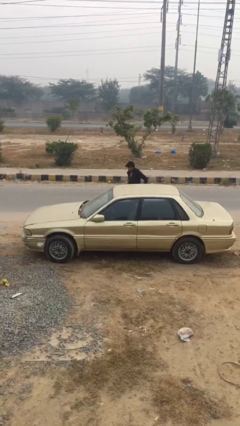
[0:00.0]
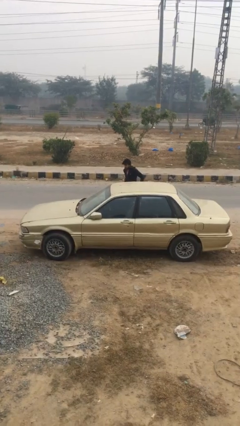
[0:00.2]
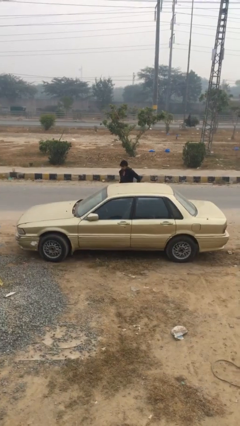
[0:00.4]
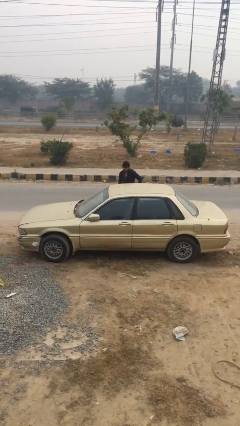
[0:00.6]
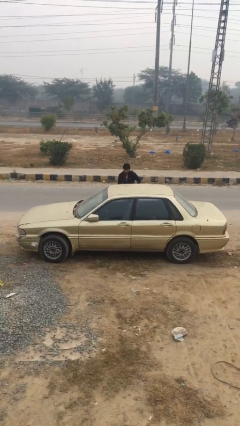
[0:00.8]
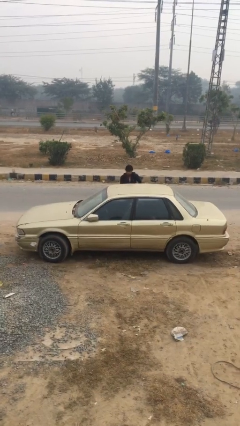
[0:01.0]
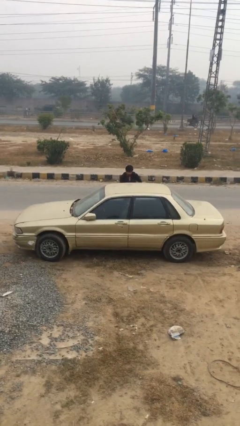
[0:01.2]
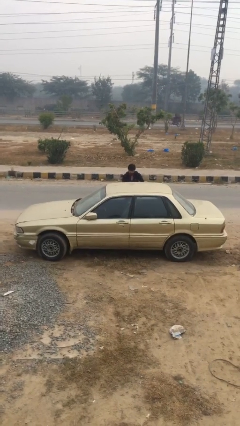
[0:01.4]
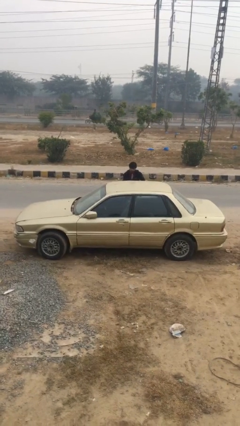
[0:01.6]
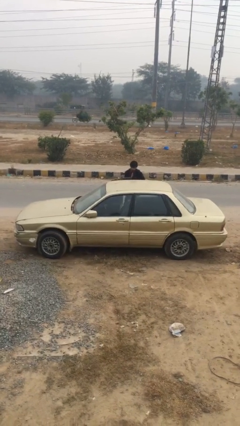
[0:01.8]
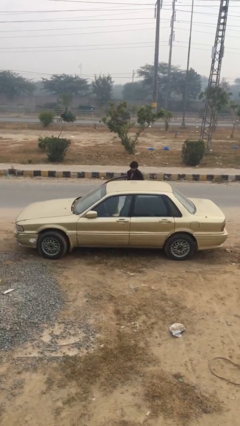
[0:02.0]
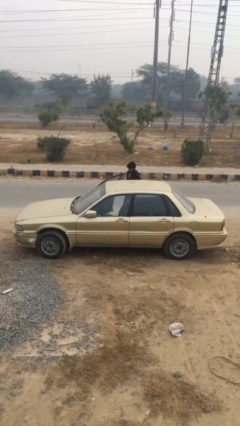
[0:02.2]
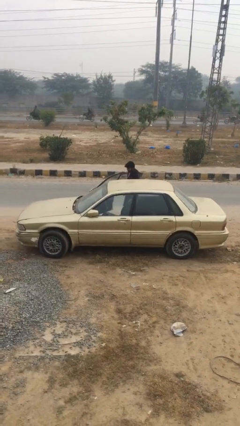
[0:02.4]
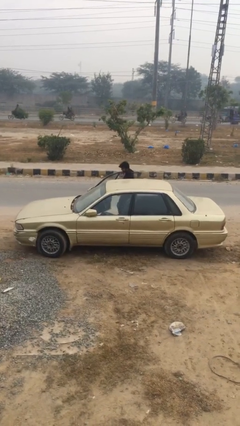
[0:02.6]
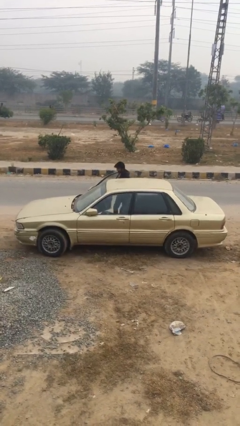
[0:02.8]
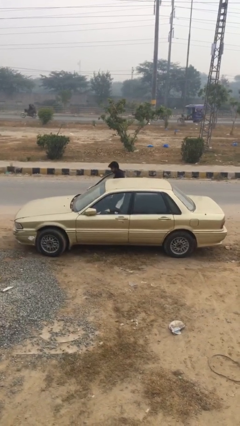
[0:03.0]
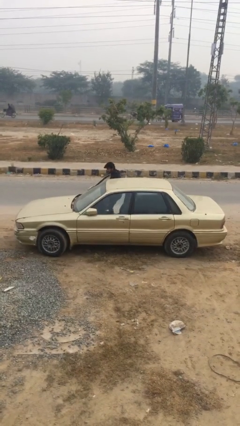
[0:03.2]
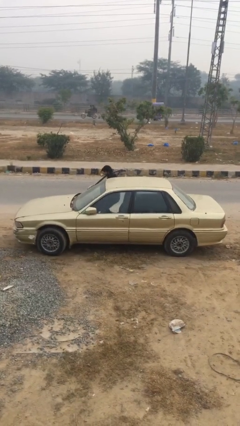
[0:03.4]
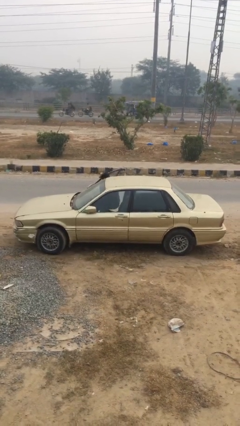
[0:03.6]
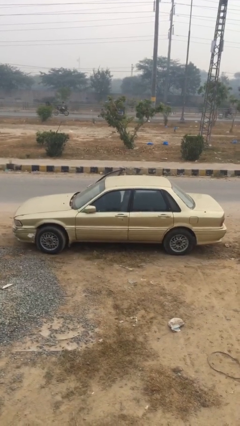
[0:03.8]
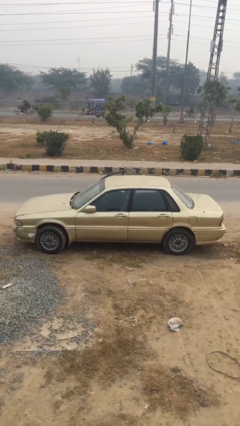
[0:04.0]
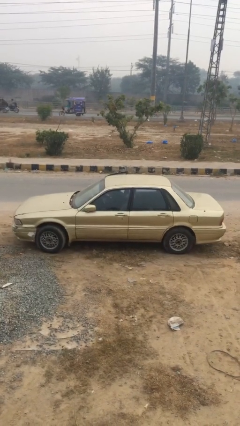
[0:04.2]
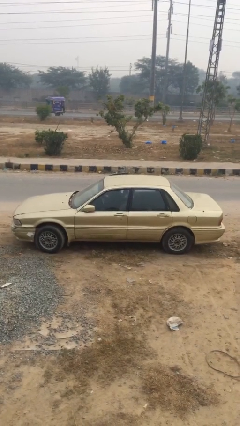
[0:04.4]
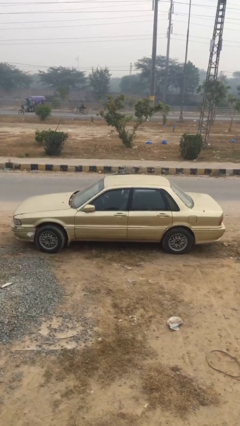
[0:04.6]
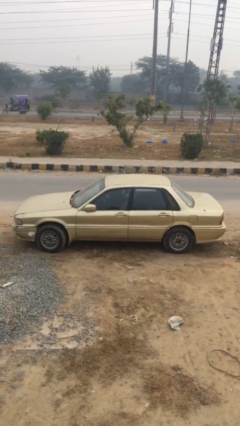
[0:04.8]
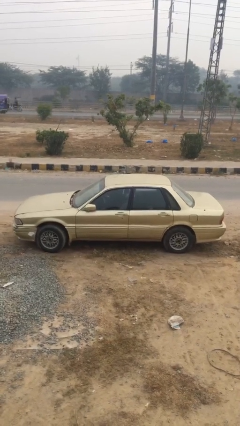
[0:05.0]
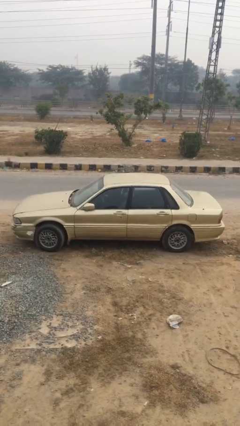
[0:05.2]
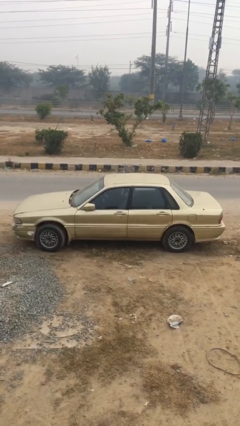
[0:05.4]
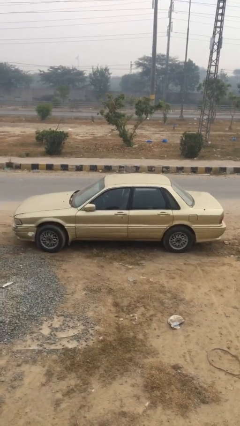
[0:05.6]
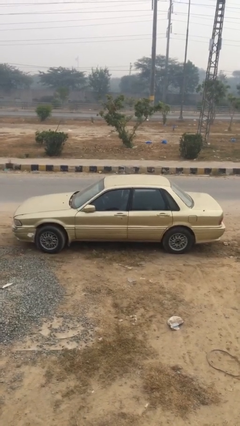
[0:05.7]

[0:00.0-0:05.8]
car picks up person

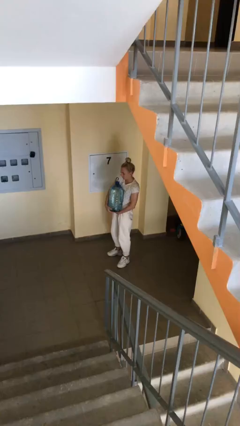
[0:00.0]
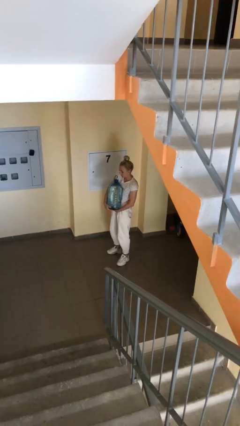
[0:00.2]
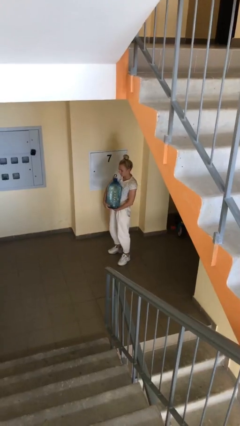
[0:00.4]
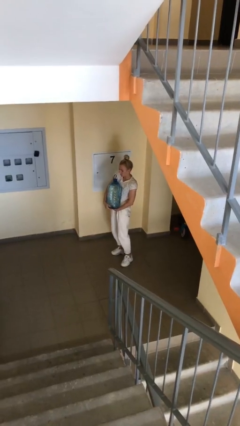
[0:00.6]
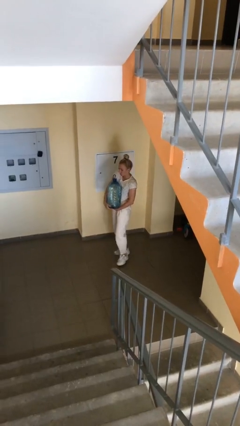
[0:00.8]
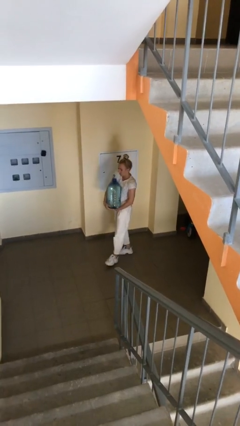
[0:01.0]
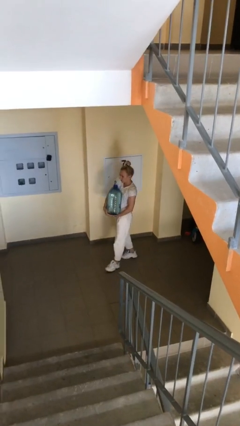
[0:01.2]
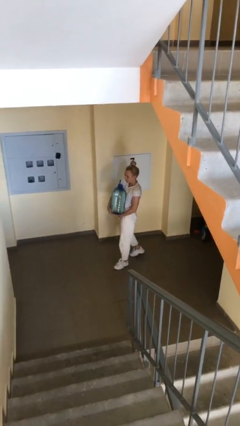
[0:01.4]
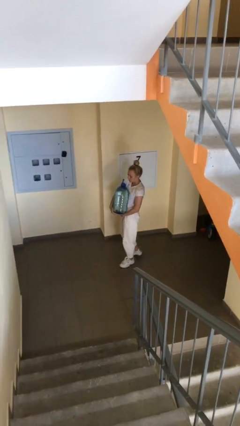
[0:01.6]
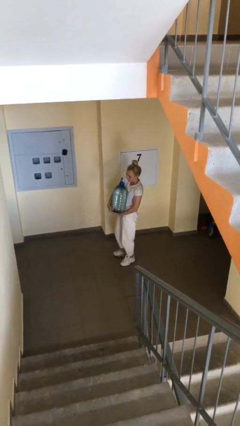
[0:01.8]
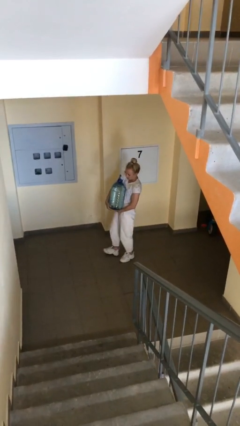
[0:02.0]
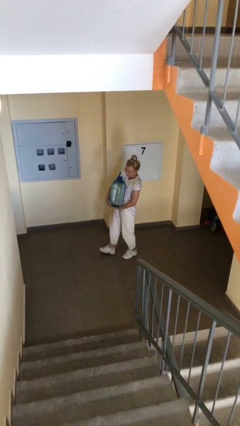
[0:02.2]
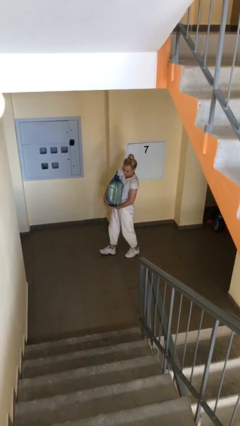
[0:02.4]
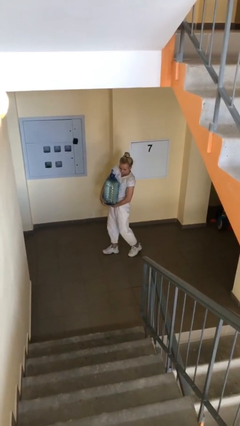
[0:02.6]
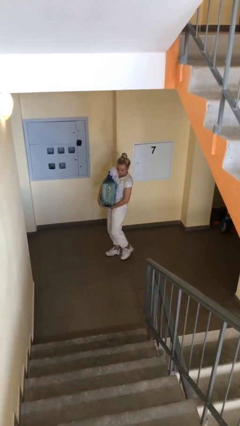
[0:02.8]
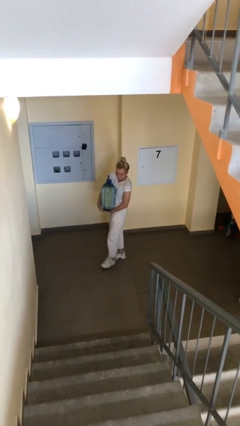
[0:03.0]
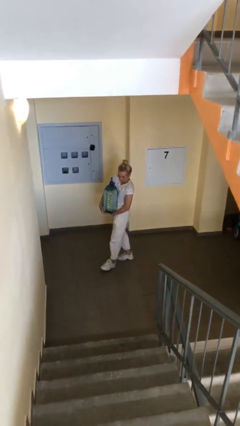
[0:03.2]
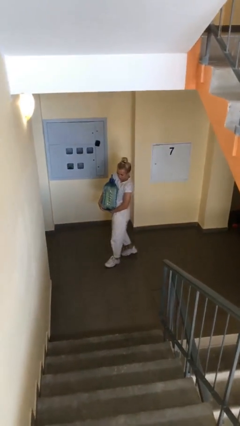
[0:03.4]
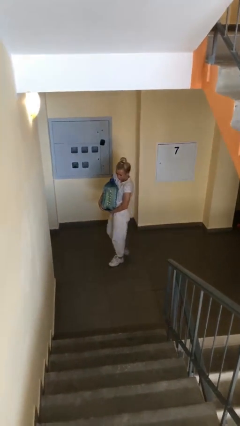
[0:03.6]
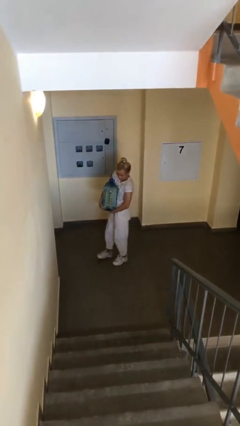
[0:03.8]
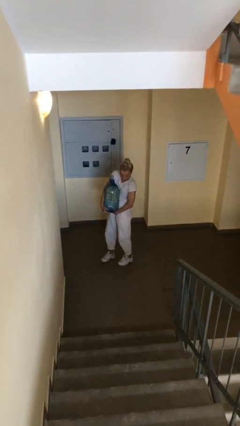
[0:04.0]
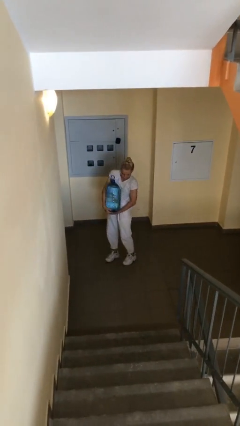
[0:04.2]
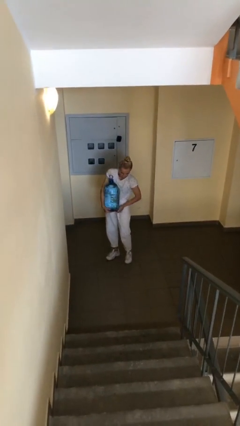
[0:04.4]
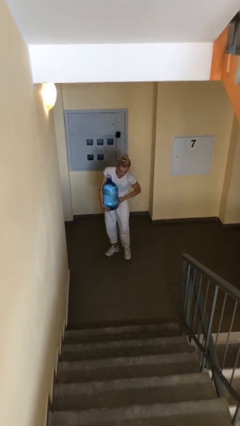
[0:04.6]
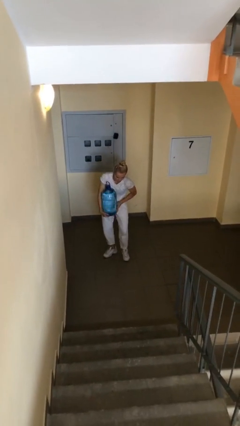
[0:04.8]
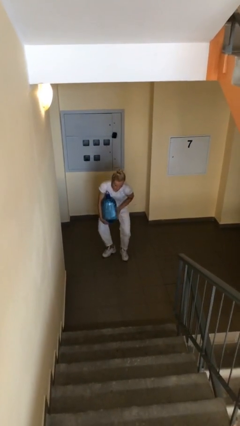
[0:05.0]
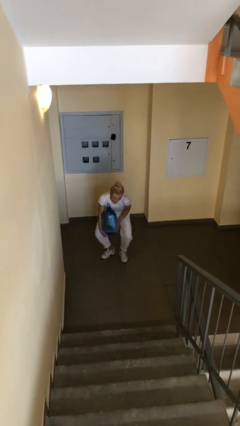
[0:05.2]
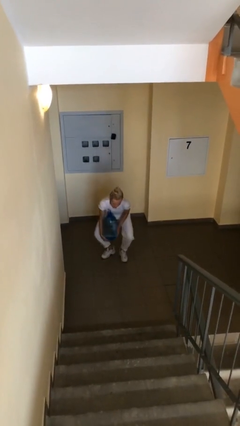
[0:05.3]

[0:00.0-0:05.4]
person carries heavy object

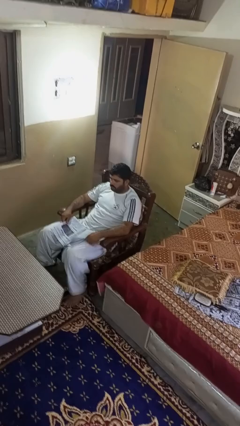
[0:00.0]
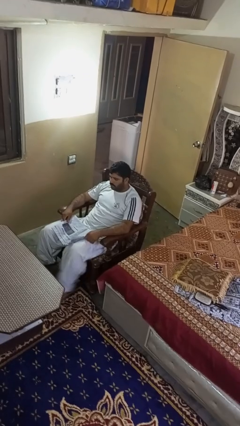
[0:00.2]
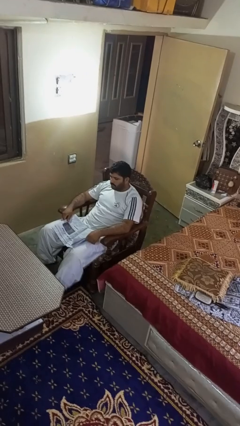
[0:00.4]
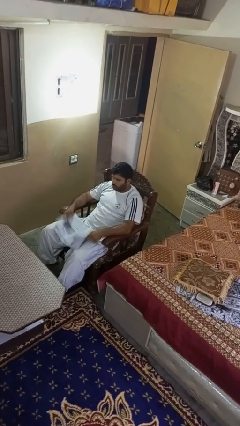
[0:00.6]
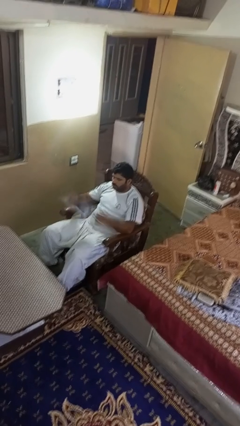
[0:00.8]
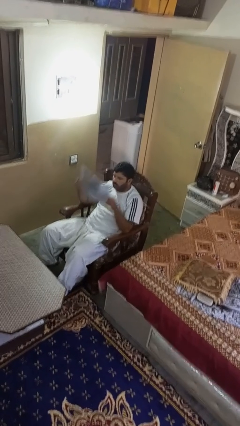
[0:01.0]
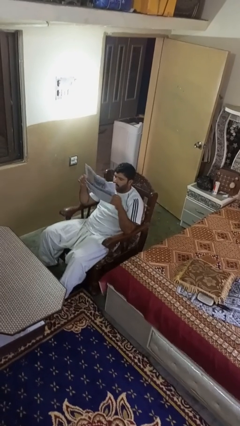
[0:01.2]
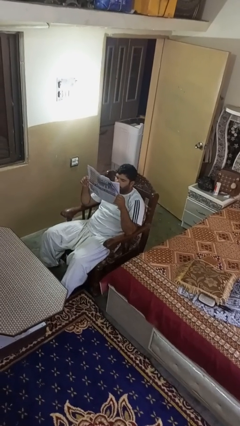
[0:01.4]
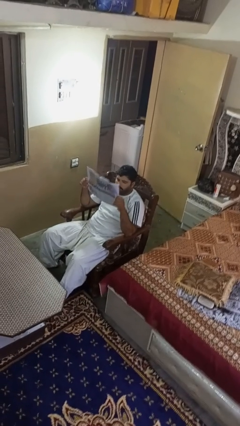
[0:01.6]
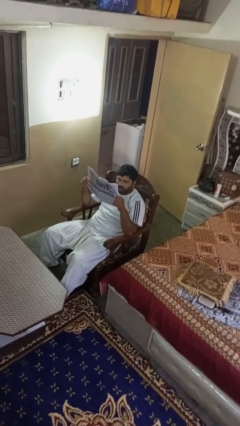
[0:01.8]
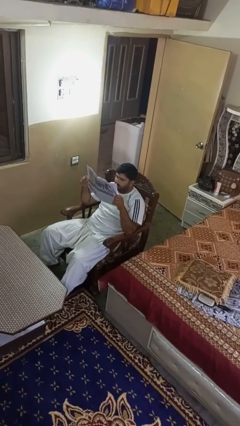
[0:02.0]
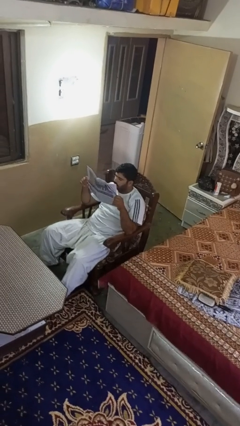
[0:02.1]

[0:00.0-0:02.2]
person reads newspaper

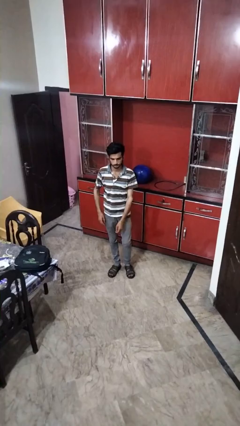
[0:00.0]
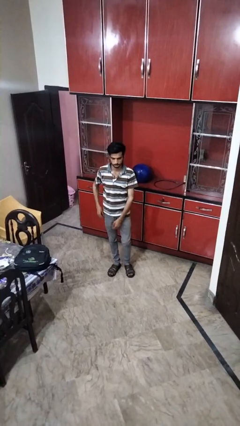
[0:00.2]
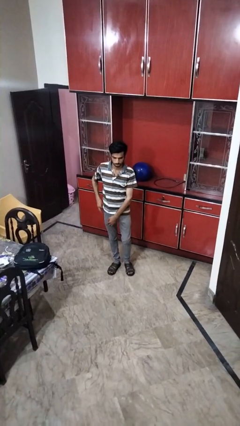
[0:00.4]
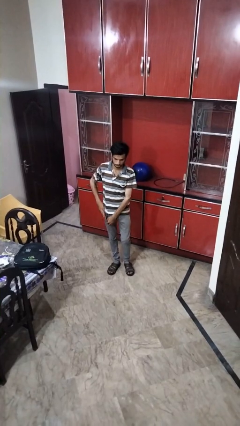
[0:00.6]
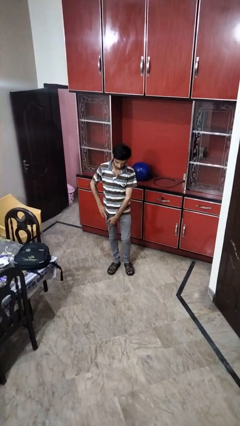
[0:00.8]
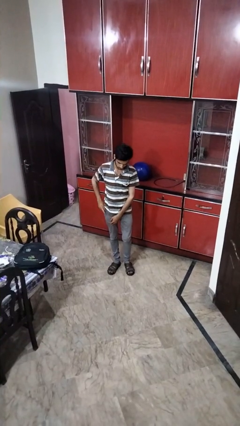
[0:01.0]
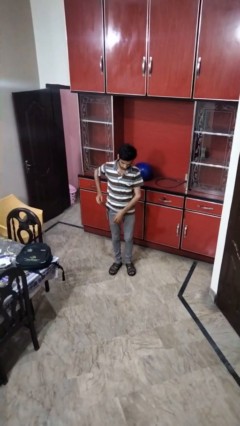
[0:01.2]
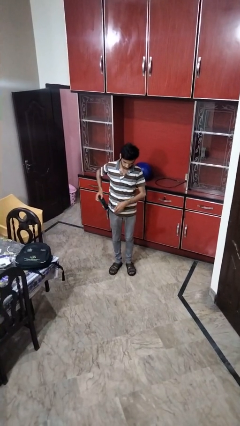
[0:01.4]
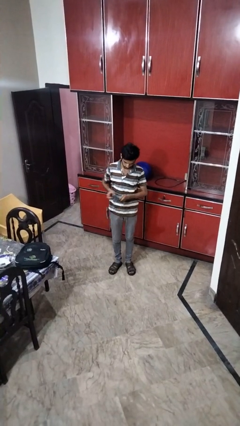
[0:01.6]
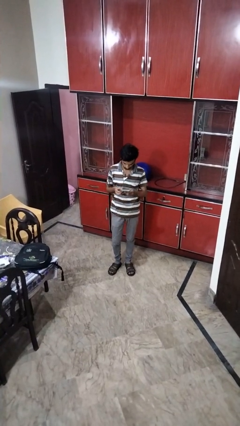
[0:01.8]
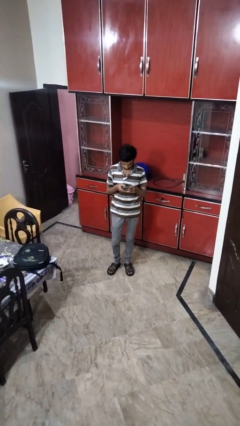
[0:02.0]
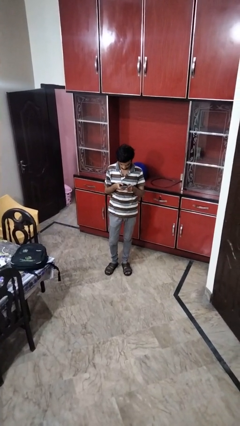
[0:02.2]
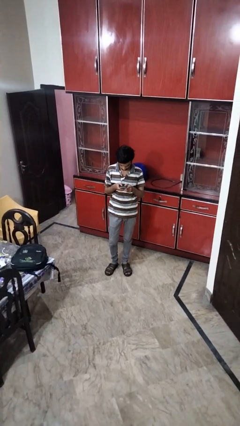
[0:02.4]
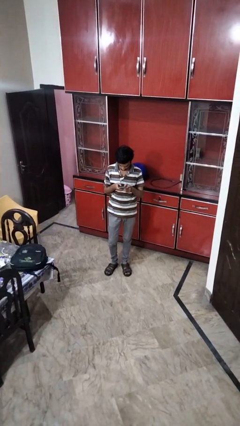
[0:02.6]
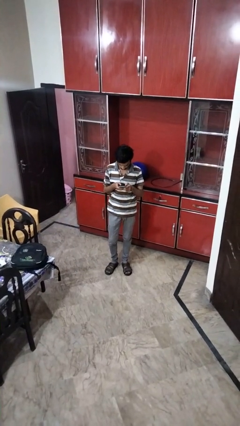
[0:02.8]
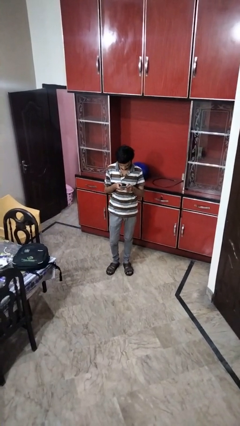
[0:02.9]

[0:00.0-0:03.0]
person takes phone from pocket

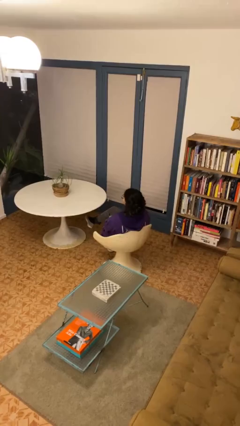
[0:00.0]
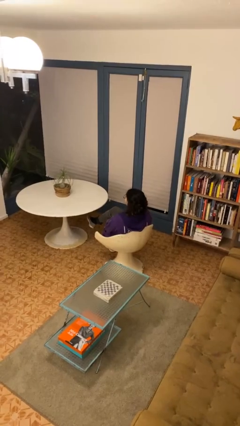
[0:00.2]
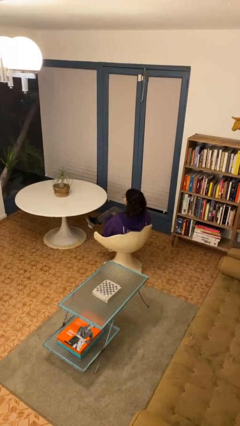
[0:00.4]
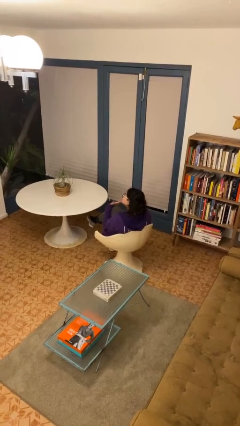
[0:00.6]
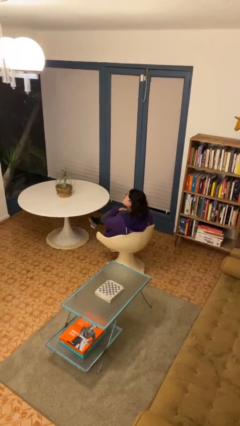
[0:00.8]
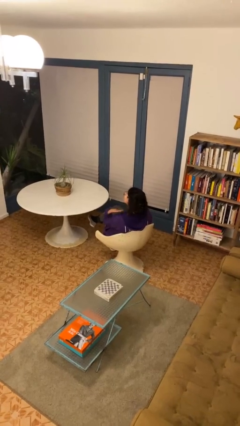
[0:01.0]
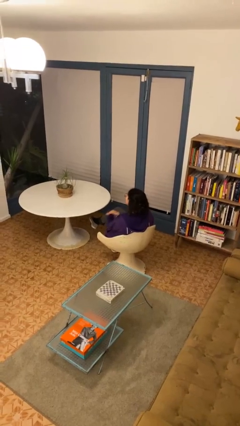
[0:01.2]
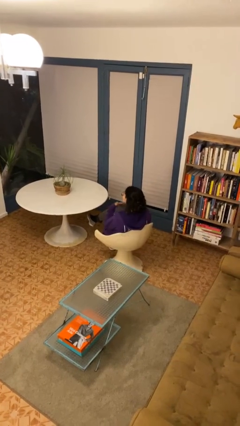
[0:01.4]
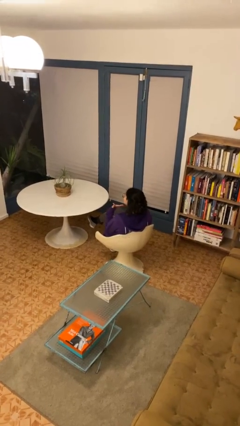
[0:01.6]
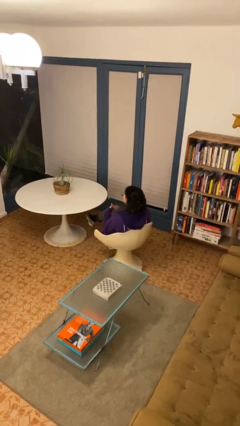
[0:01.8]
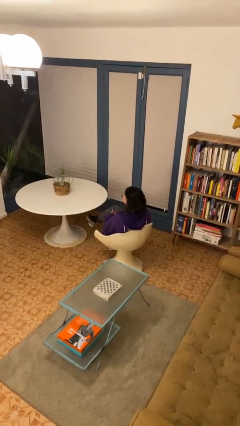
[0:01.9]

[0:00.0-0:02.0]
person gestures cut
